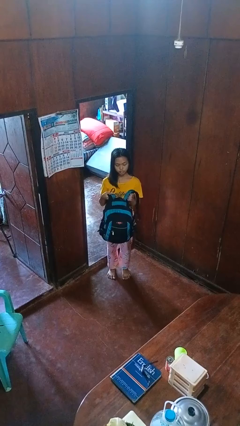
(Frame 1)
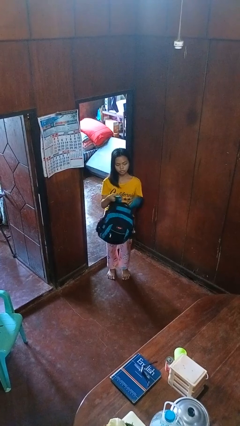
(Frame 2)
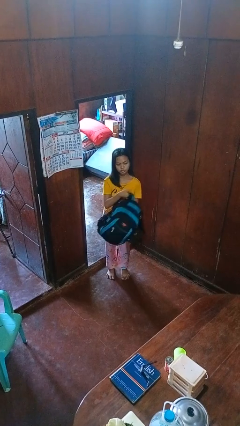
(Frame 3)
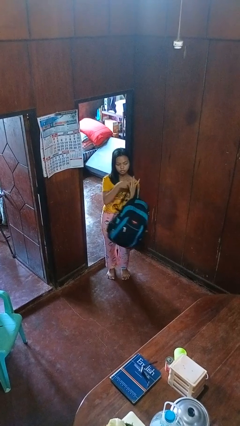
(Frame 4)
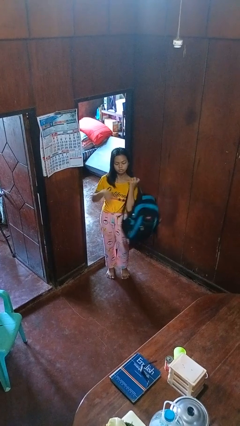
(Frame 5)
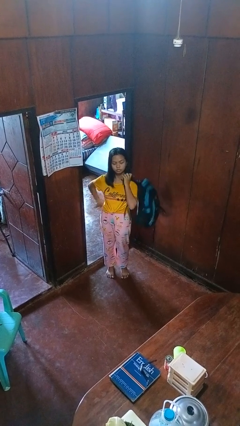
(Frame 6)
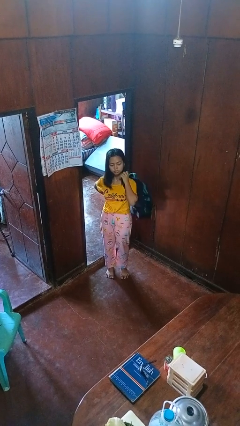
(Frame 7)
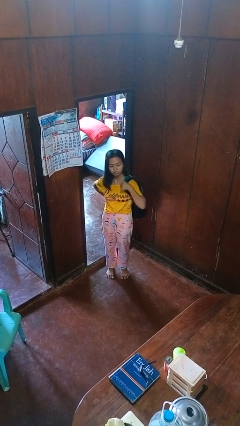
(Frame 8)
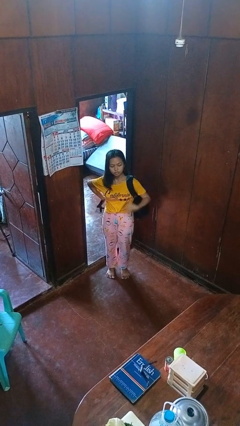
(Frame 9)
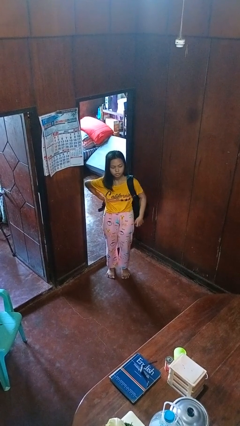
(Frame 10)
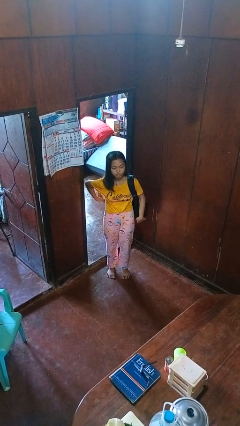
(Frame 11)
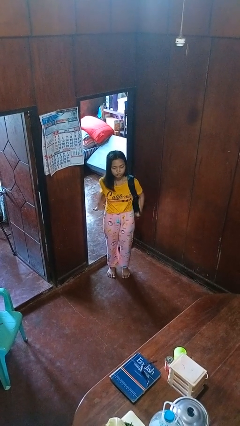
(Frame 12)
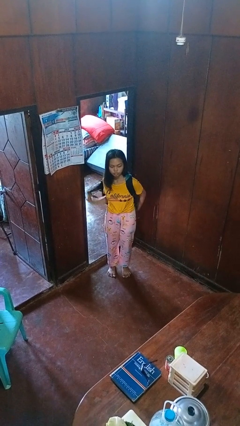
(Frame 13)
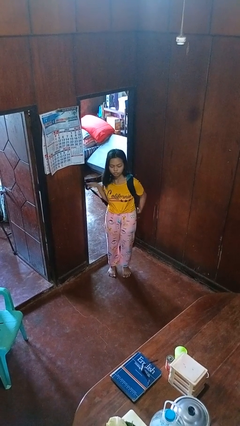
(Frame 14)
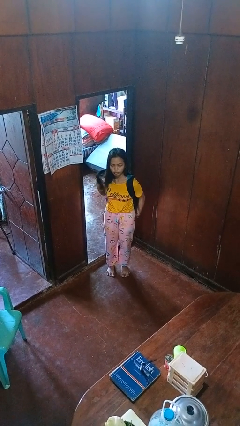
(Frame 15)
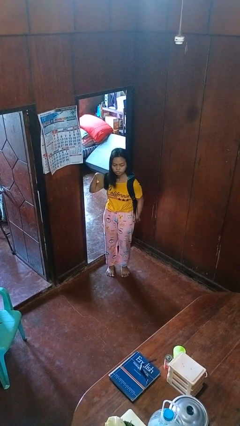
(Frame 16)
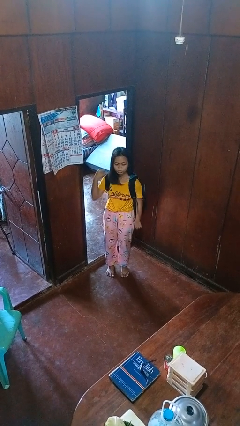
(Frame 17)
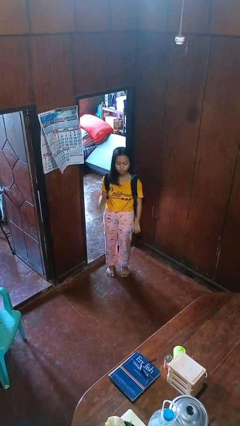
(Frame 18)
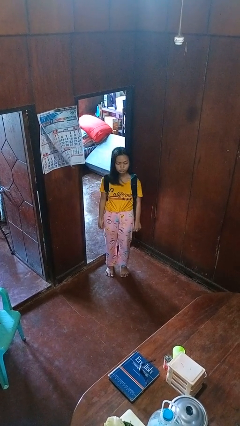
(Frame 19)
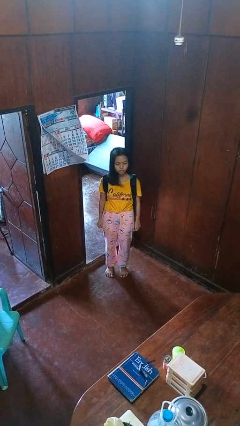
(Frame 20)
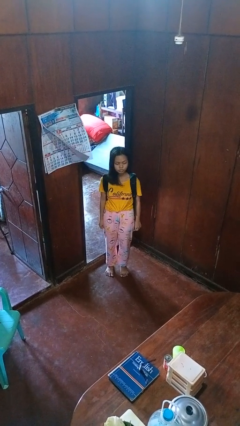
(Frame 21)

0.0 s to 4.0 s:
person puts on backpack

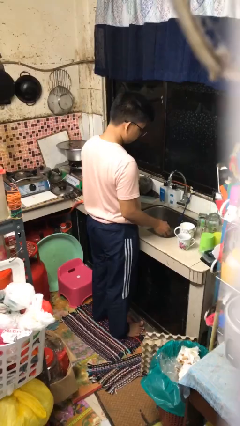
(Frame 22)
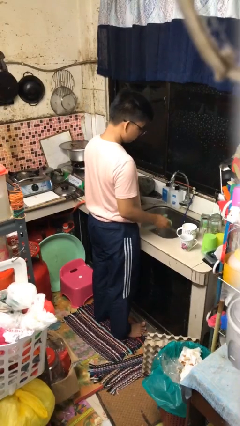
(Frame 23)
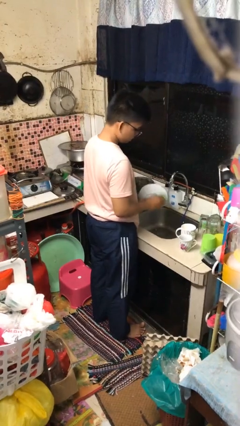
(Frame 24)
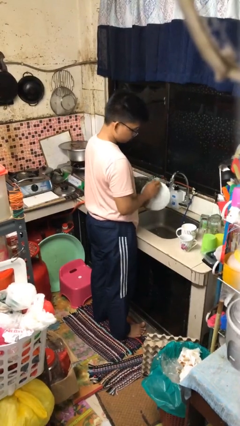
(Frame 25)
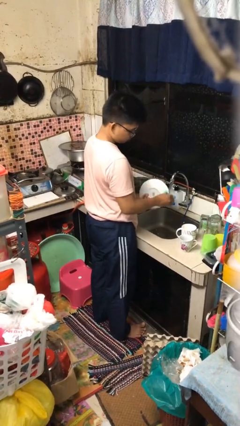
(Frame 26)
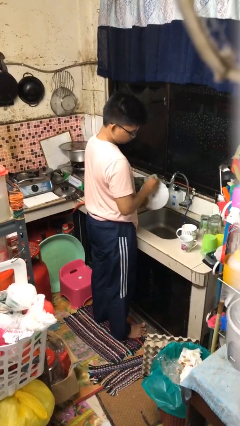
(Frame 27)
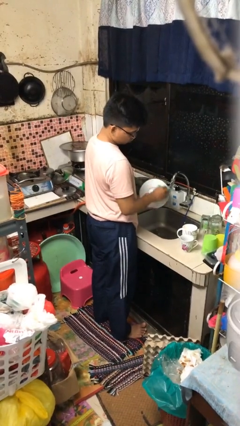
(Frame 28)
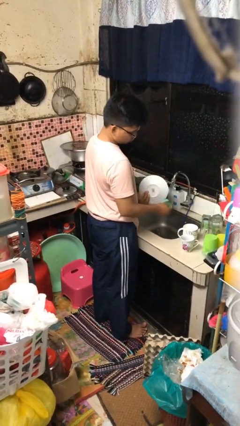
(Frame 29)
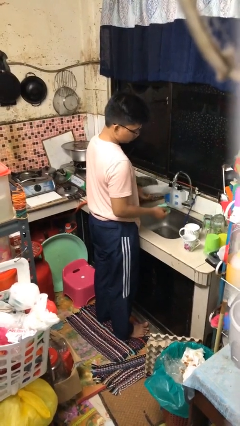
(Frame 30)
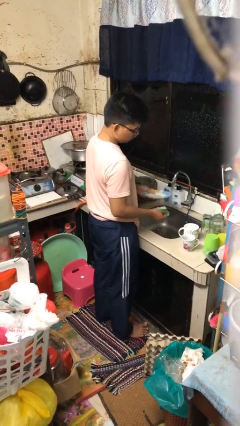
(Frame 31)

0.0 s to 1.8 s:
person washes dish

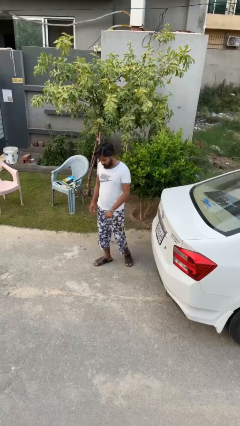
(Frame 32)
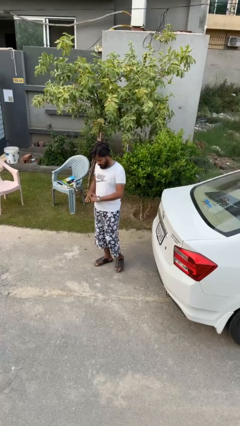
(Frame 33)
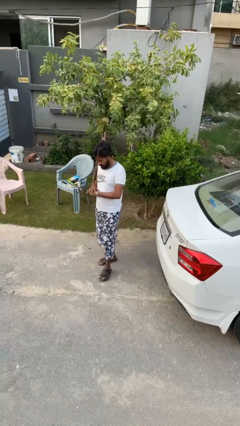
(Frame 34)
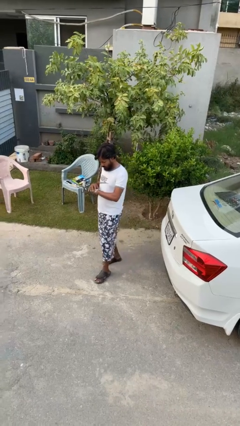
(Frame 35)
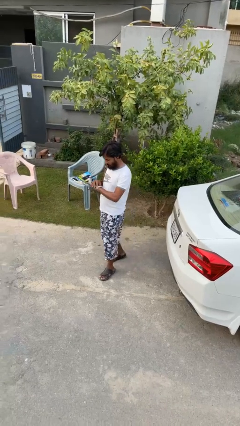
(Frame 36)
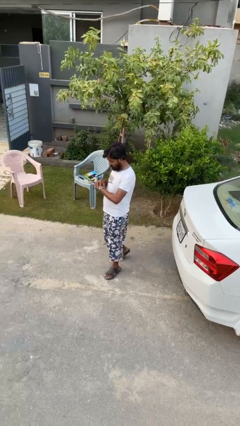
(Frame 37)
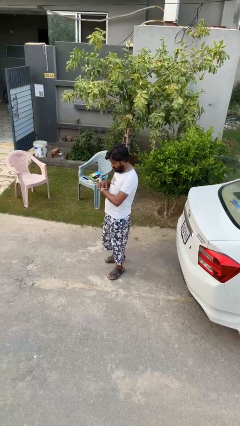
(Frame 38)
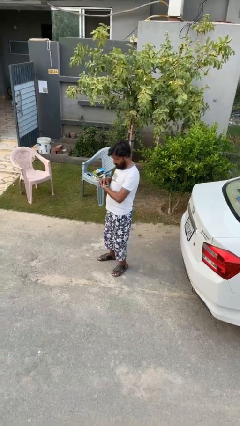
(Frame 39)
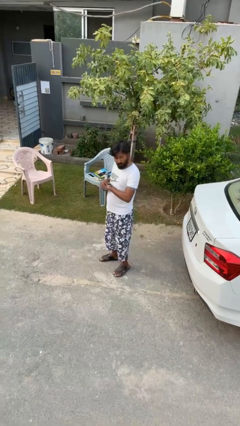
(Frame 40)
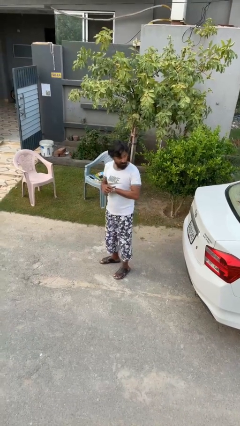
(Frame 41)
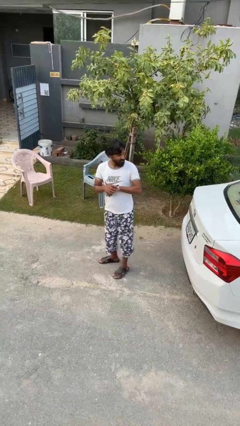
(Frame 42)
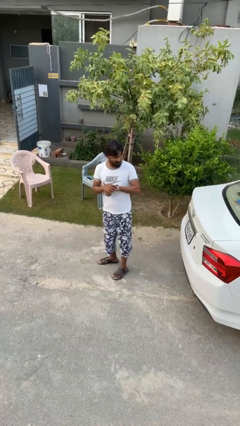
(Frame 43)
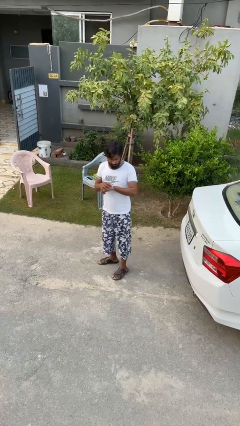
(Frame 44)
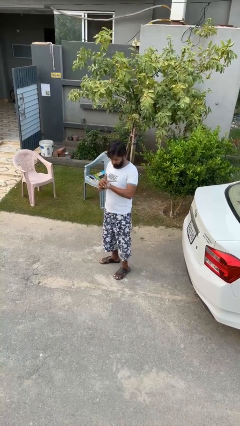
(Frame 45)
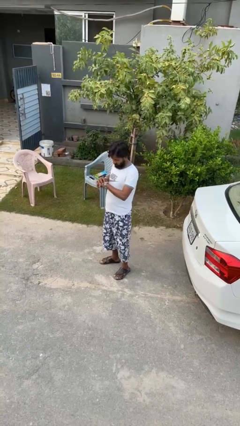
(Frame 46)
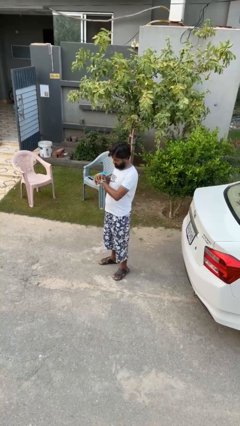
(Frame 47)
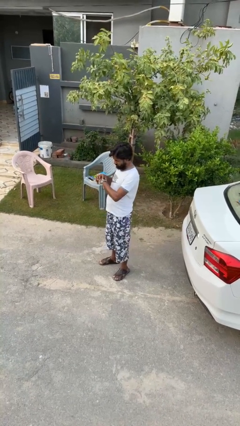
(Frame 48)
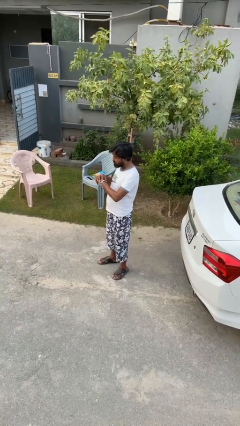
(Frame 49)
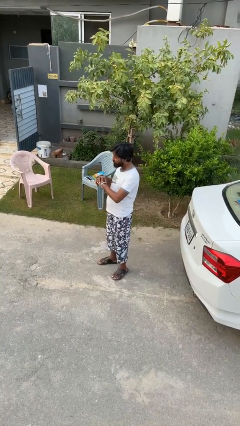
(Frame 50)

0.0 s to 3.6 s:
person looks at wristwatch

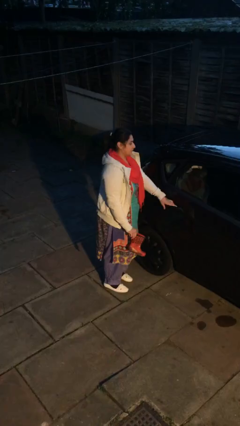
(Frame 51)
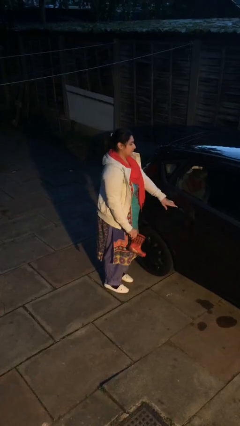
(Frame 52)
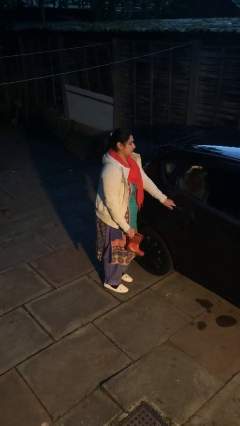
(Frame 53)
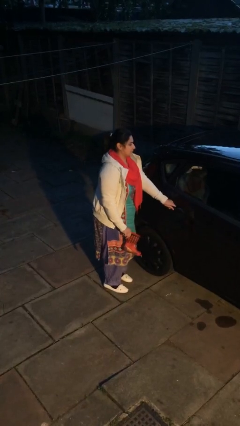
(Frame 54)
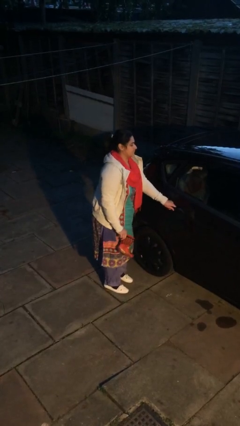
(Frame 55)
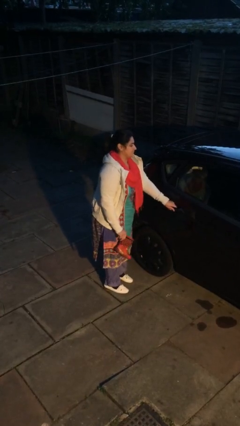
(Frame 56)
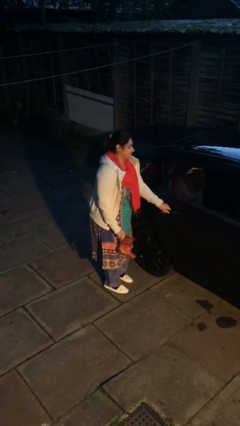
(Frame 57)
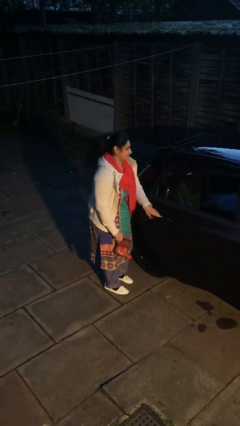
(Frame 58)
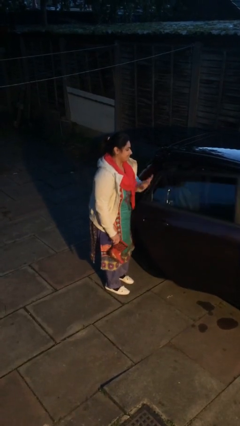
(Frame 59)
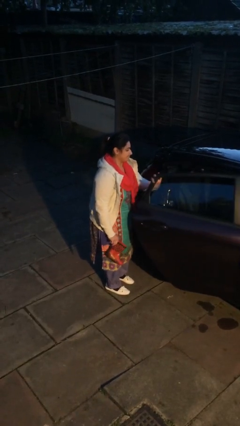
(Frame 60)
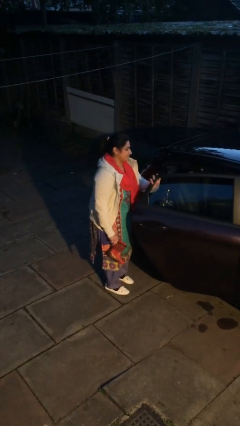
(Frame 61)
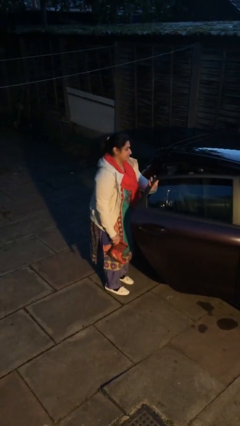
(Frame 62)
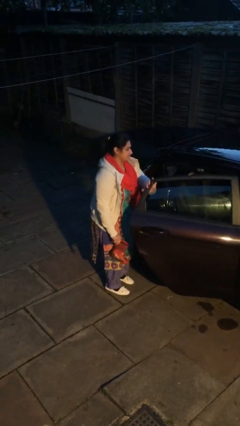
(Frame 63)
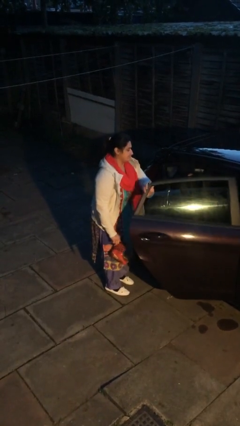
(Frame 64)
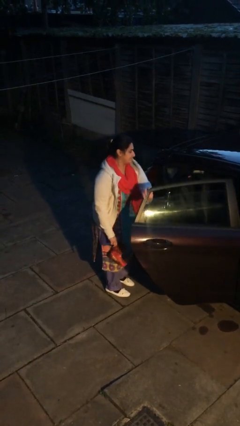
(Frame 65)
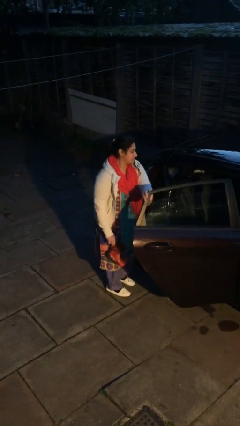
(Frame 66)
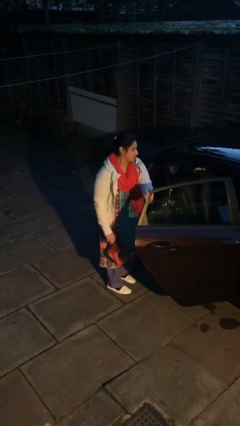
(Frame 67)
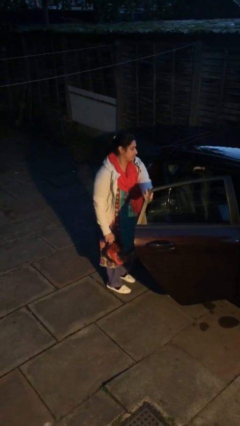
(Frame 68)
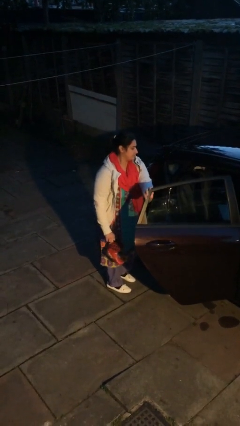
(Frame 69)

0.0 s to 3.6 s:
person opens car door

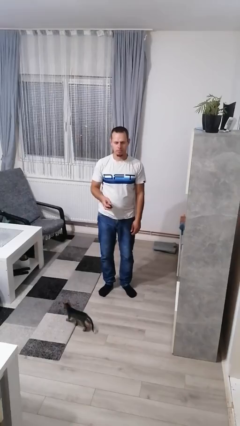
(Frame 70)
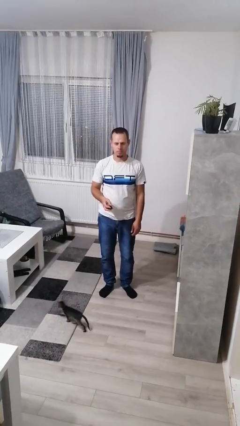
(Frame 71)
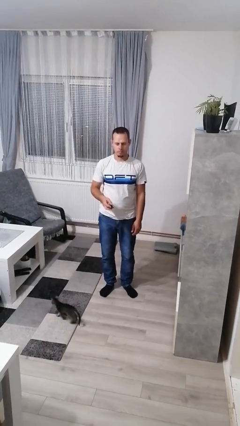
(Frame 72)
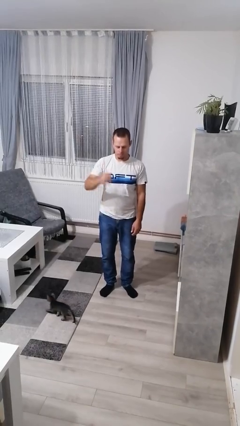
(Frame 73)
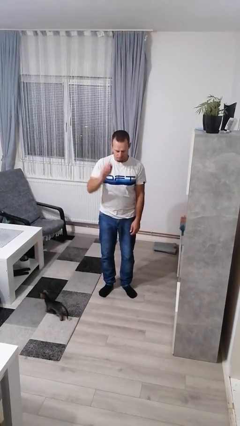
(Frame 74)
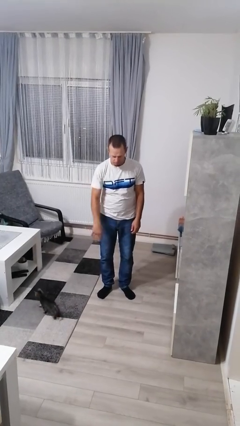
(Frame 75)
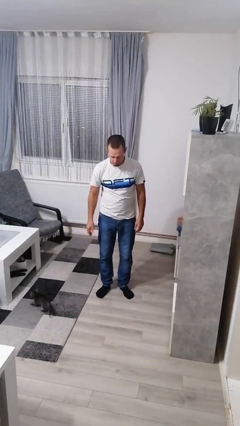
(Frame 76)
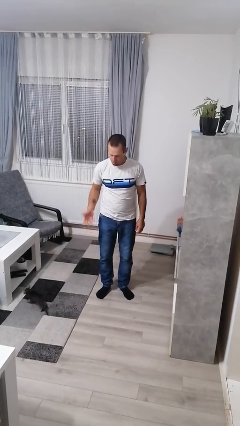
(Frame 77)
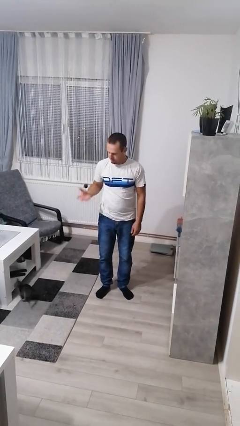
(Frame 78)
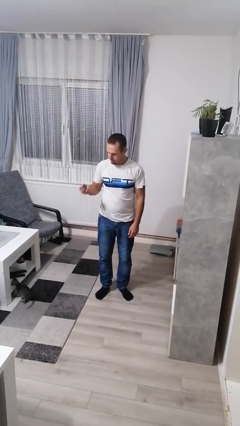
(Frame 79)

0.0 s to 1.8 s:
person bounces ball on floor

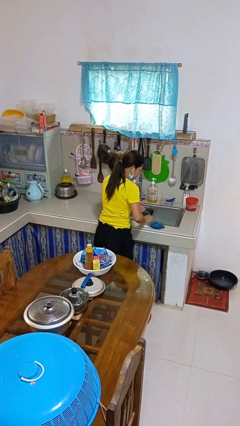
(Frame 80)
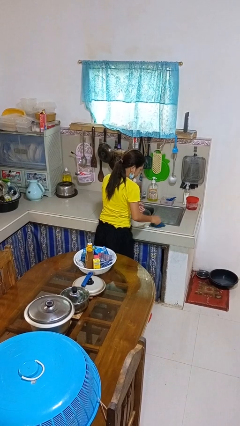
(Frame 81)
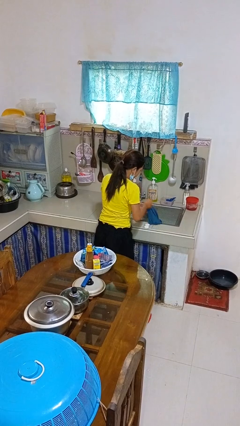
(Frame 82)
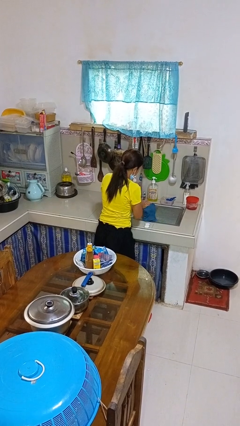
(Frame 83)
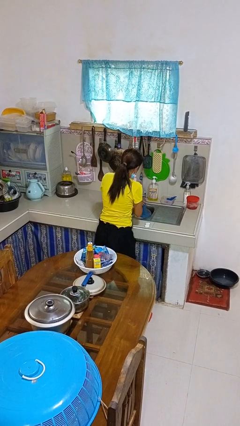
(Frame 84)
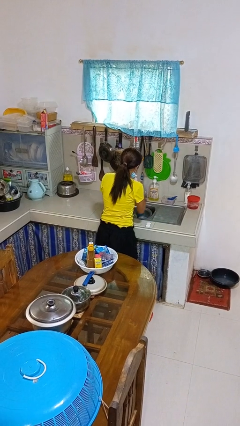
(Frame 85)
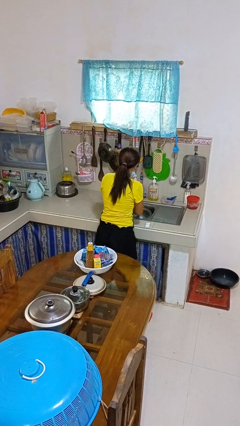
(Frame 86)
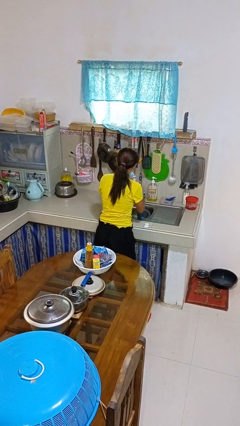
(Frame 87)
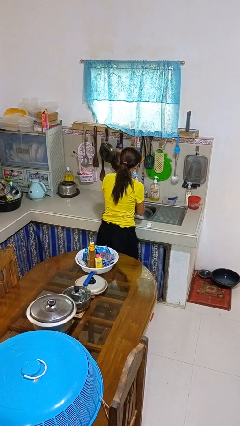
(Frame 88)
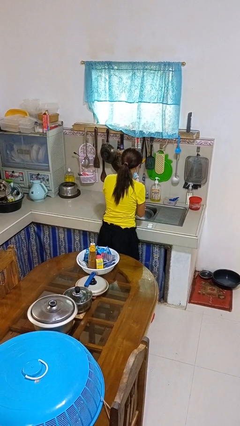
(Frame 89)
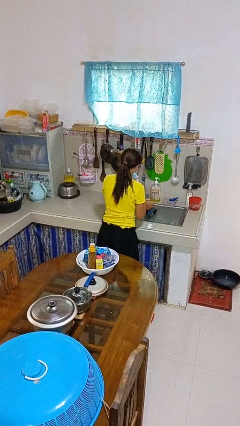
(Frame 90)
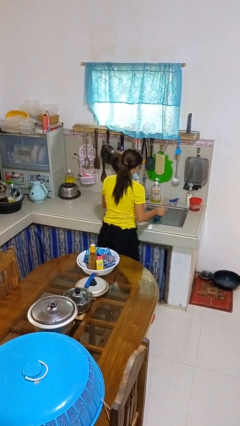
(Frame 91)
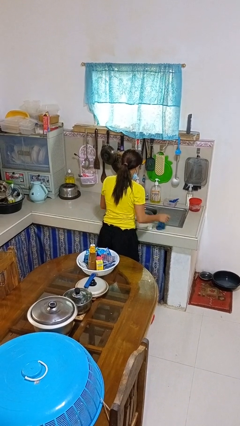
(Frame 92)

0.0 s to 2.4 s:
person dries hands with towel

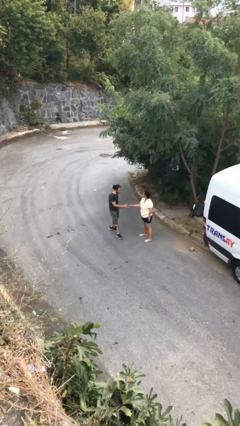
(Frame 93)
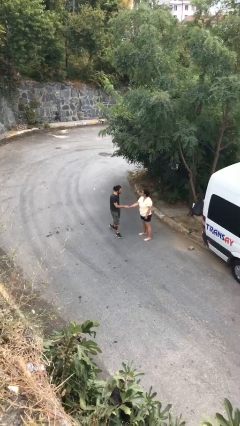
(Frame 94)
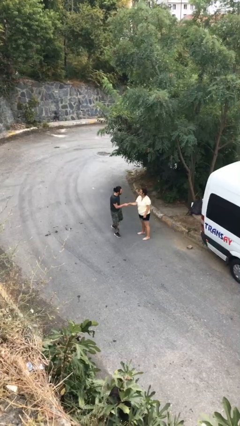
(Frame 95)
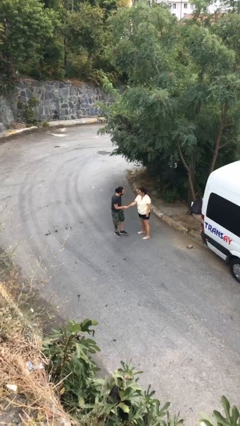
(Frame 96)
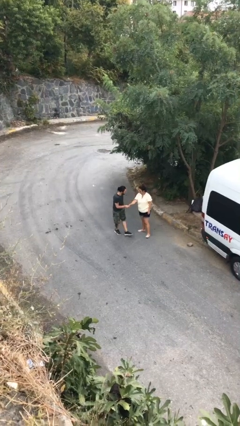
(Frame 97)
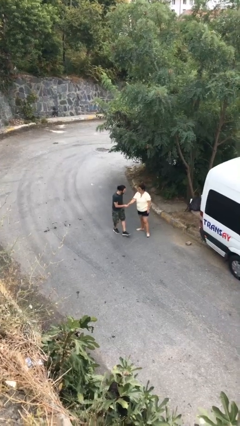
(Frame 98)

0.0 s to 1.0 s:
person shakes hand
